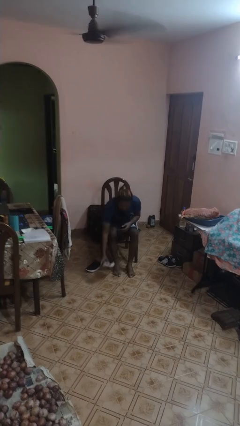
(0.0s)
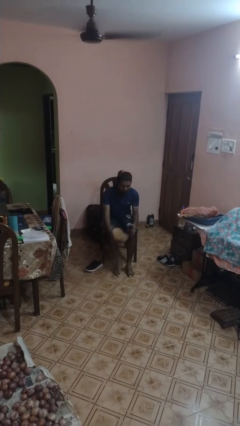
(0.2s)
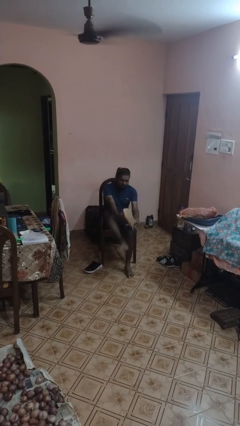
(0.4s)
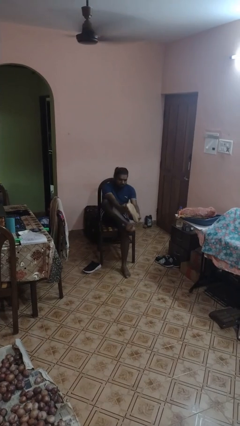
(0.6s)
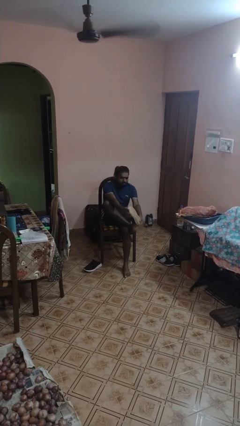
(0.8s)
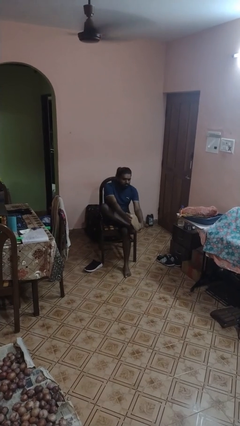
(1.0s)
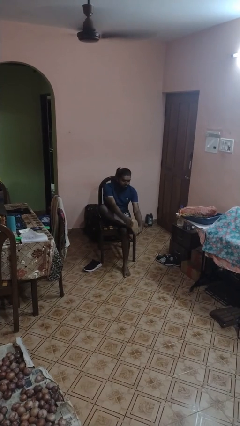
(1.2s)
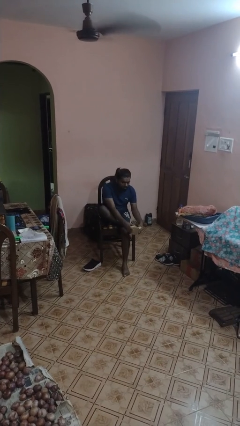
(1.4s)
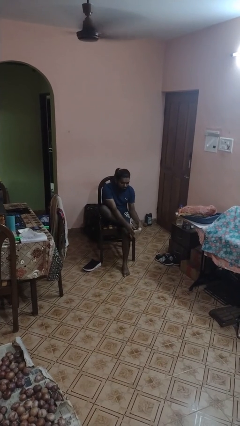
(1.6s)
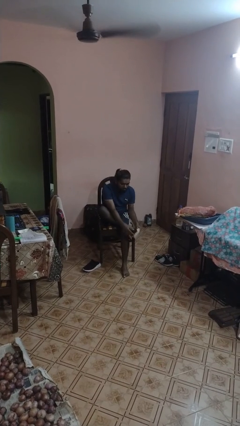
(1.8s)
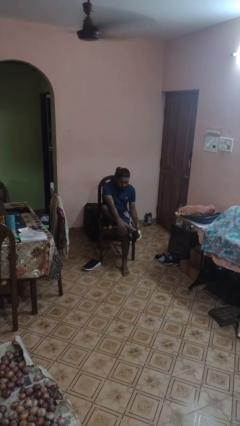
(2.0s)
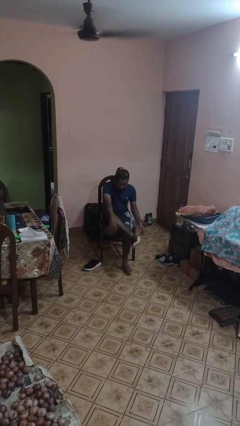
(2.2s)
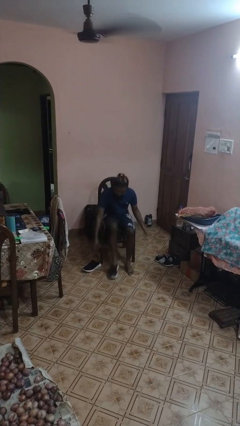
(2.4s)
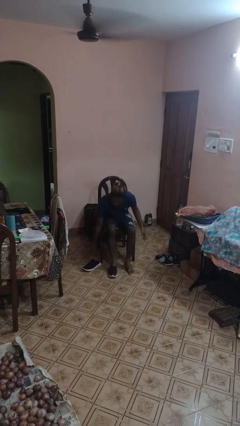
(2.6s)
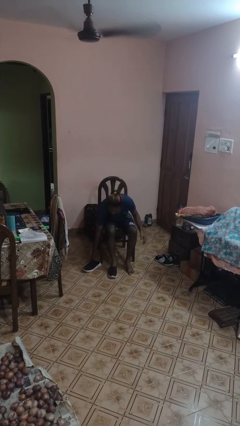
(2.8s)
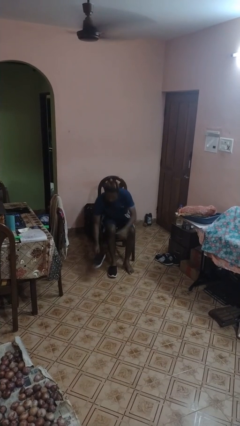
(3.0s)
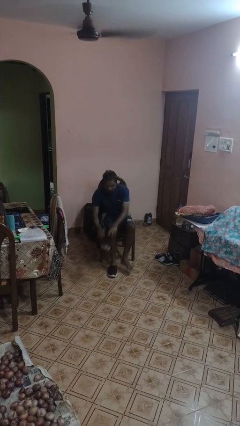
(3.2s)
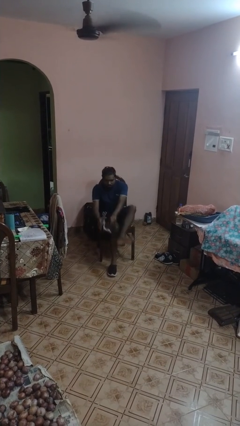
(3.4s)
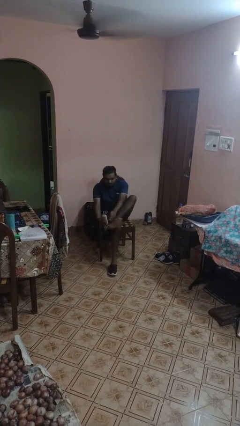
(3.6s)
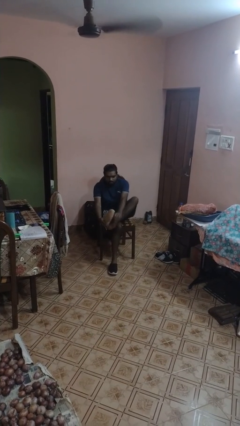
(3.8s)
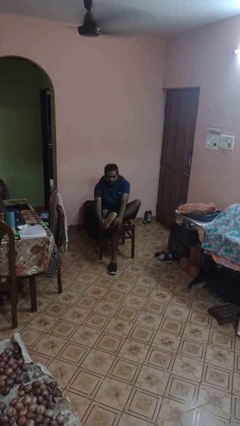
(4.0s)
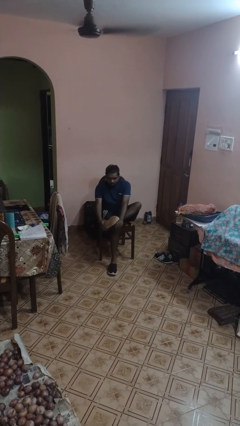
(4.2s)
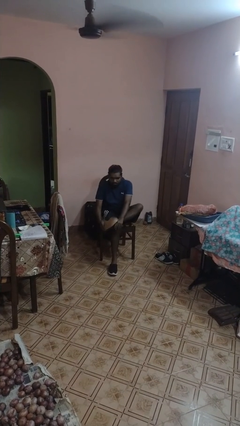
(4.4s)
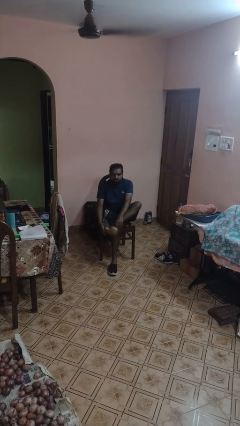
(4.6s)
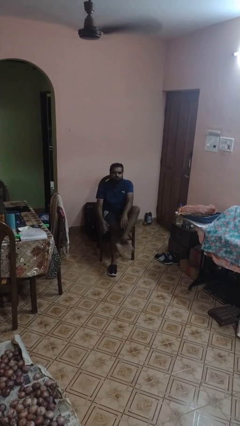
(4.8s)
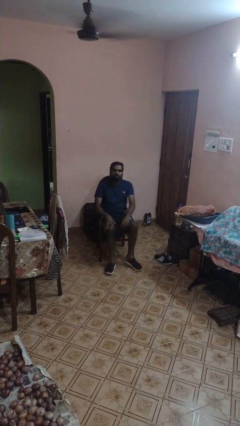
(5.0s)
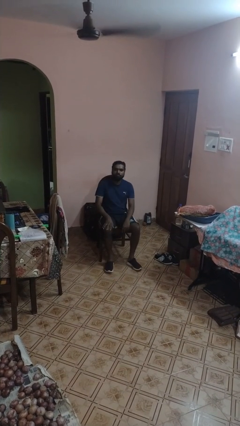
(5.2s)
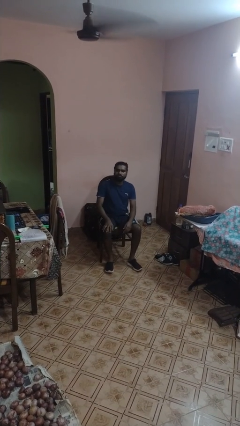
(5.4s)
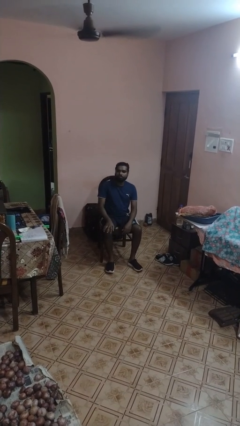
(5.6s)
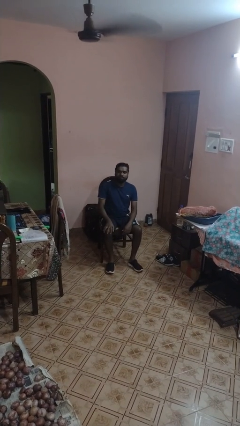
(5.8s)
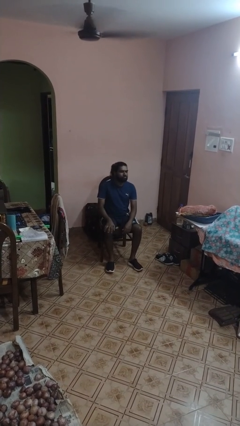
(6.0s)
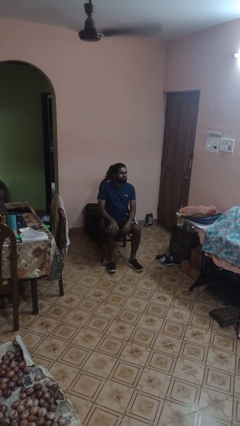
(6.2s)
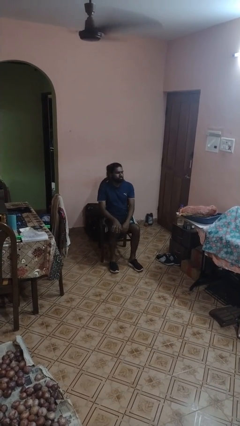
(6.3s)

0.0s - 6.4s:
person puts on shoes

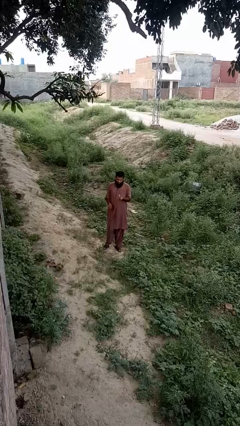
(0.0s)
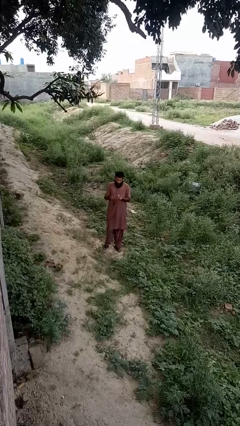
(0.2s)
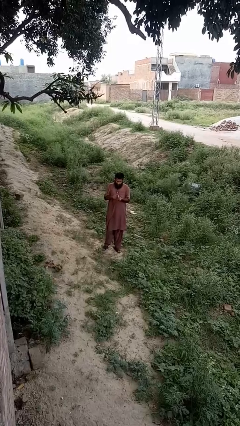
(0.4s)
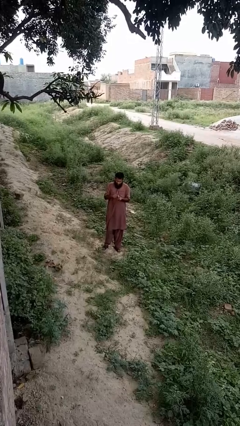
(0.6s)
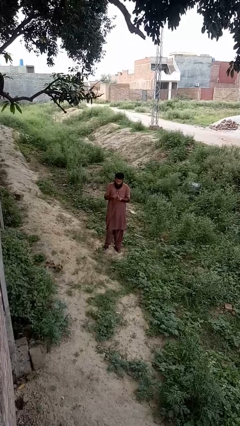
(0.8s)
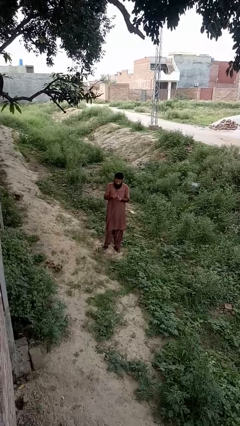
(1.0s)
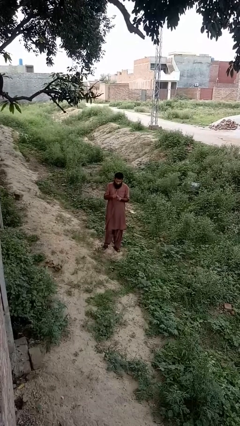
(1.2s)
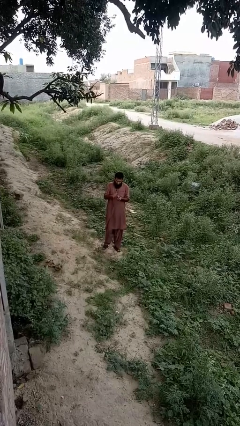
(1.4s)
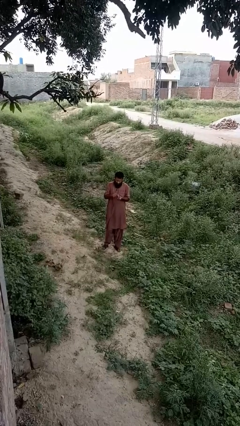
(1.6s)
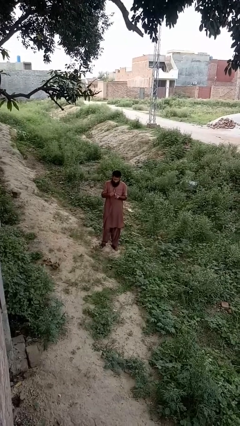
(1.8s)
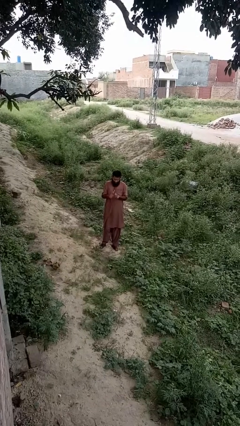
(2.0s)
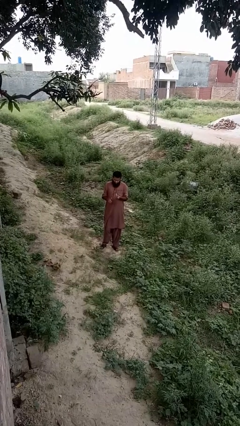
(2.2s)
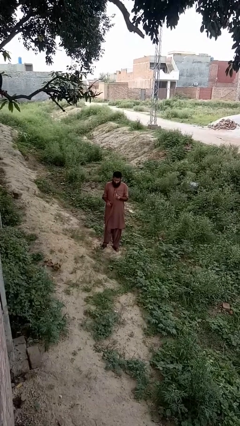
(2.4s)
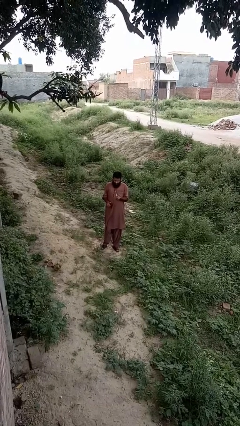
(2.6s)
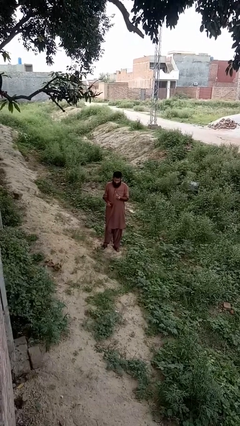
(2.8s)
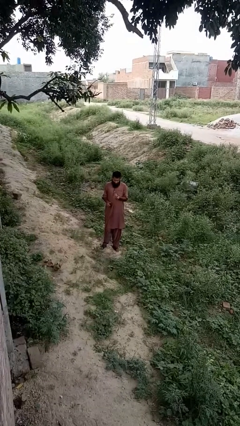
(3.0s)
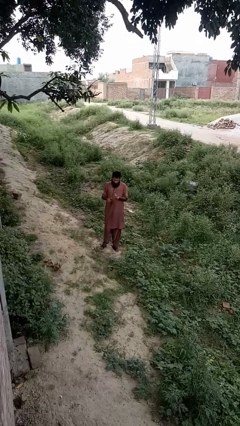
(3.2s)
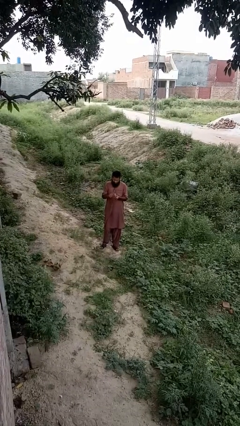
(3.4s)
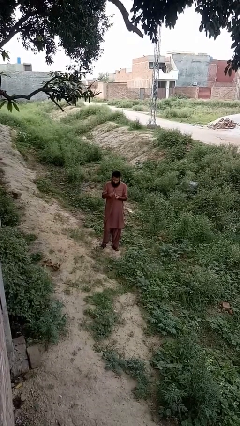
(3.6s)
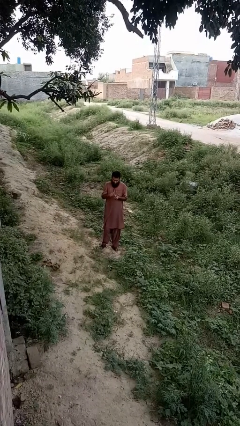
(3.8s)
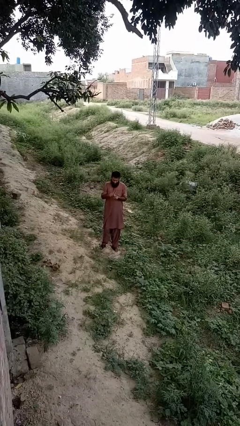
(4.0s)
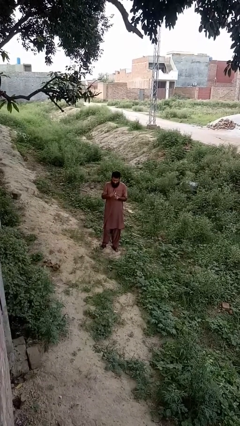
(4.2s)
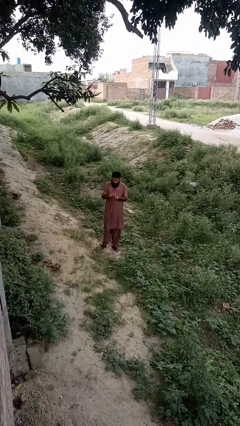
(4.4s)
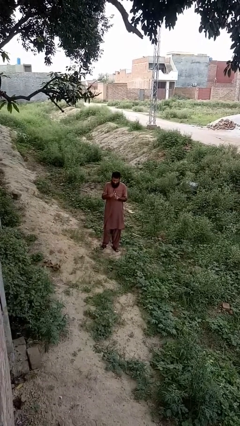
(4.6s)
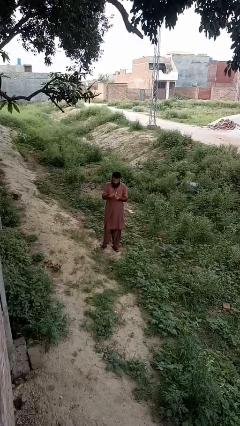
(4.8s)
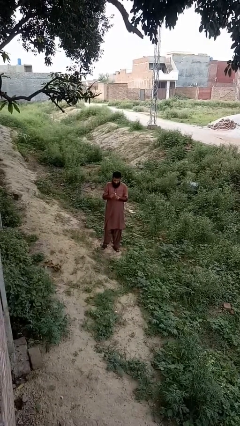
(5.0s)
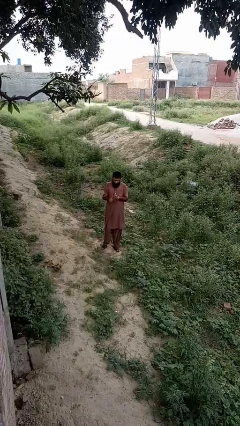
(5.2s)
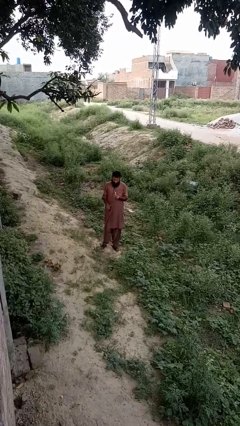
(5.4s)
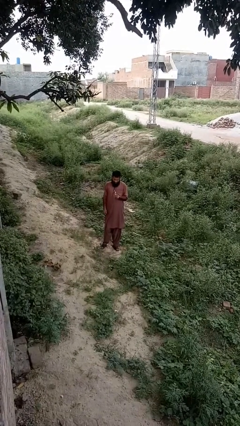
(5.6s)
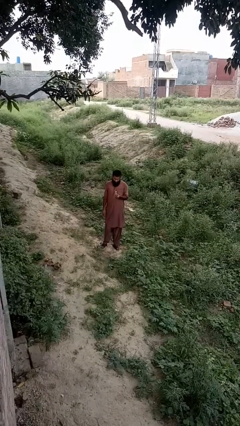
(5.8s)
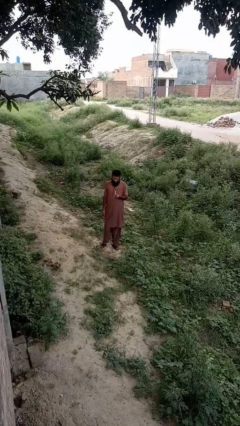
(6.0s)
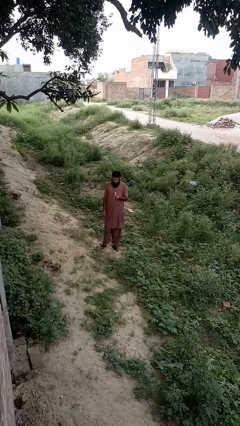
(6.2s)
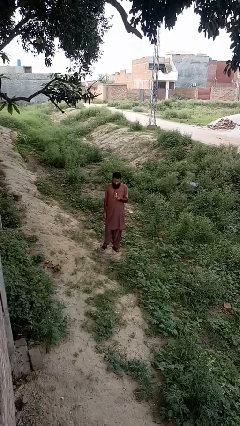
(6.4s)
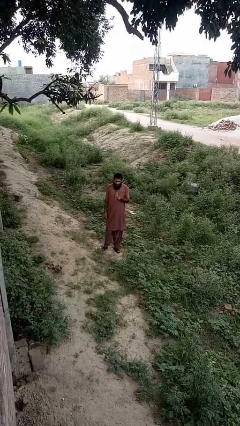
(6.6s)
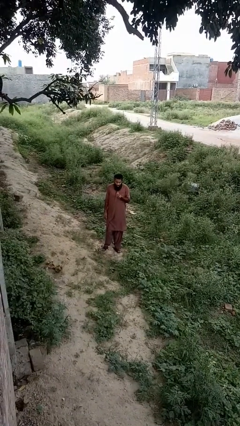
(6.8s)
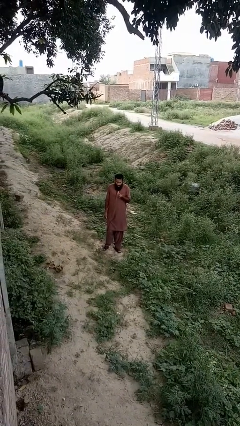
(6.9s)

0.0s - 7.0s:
person lights candle

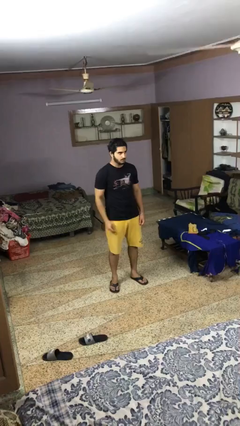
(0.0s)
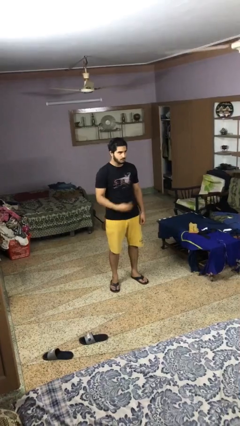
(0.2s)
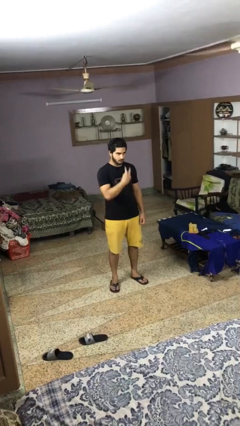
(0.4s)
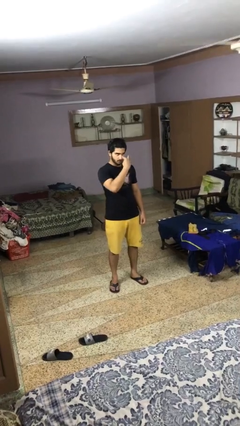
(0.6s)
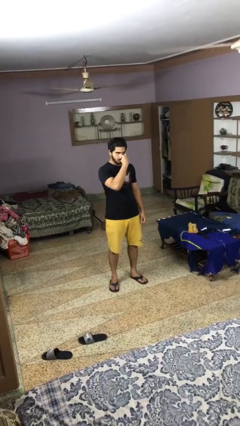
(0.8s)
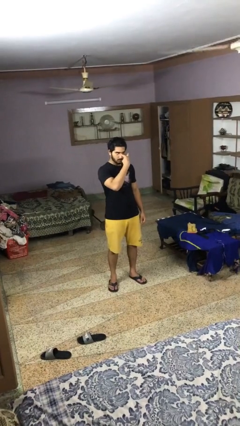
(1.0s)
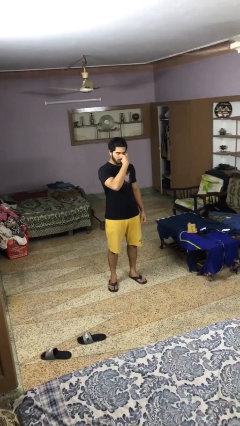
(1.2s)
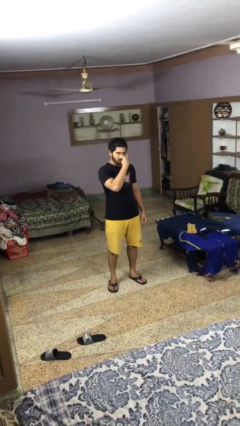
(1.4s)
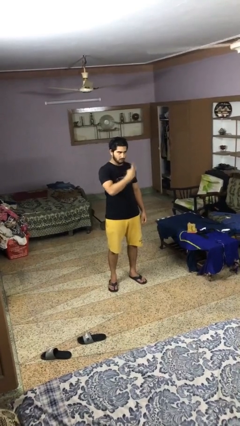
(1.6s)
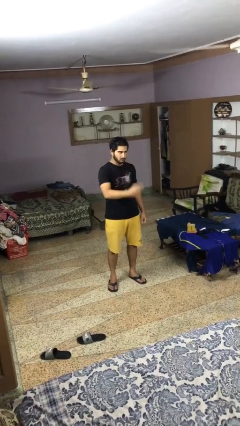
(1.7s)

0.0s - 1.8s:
person gestures watch closely

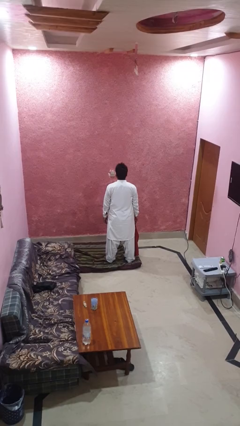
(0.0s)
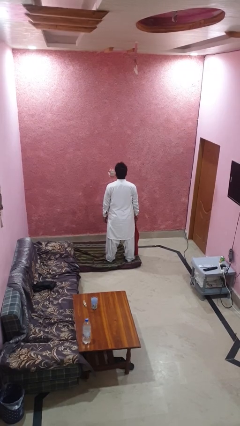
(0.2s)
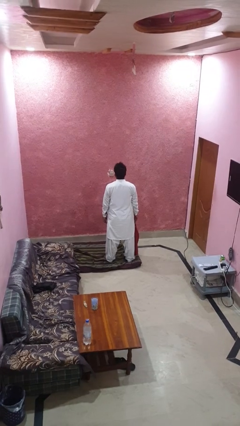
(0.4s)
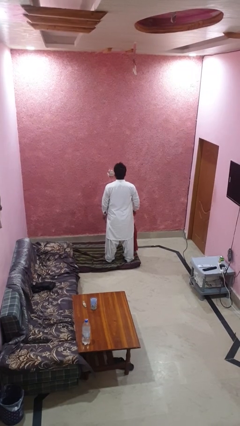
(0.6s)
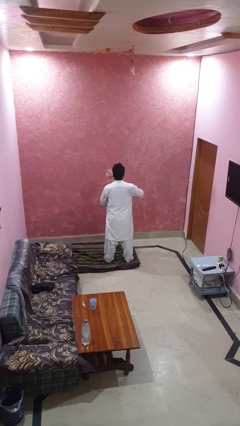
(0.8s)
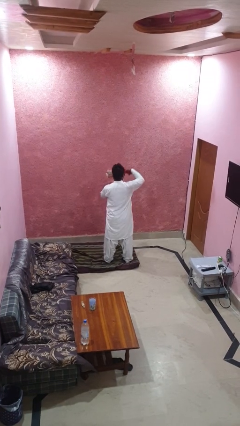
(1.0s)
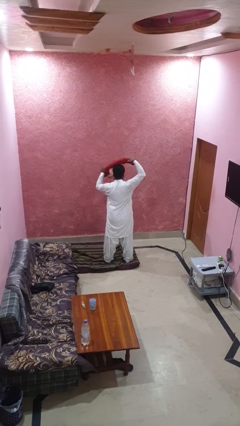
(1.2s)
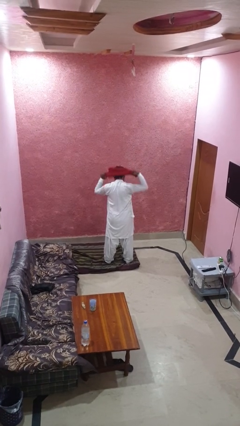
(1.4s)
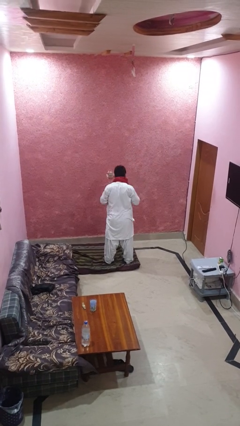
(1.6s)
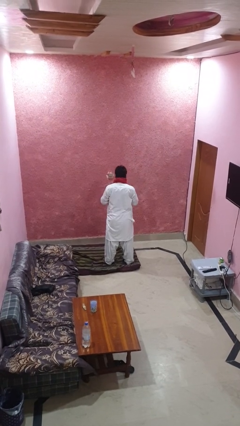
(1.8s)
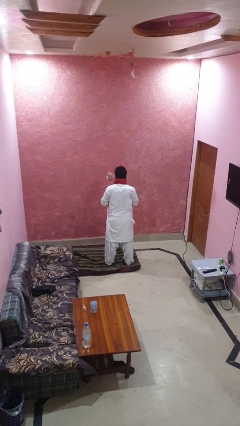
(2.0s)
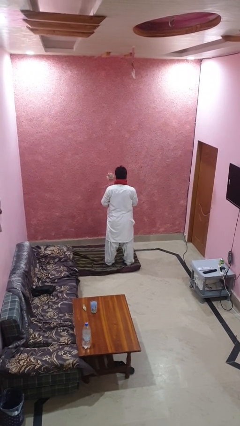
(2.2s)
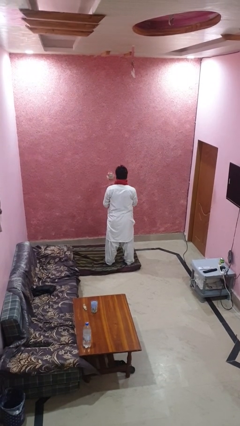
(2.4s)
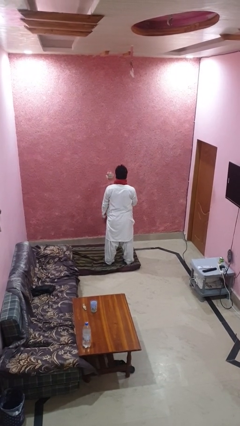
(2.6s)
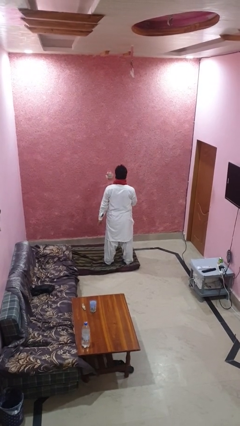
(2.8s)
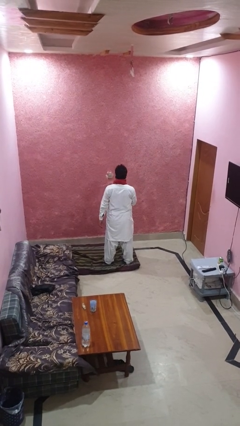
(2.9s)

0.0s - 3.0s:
person puts on scarf
